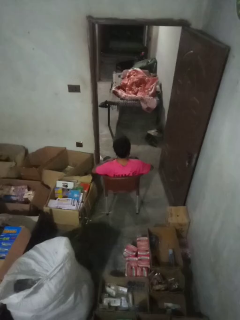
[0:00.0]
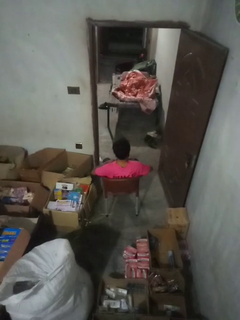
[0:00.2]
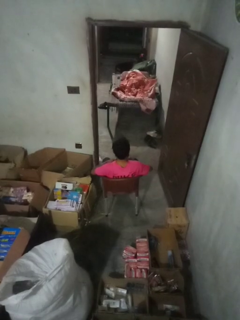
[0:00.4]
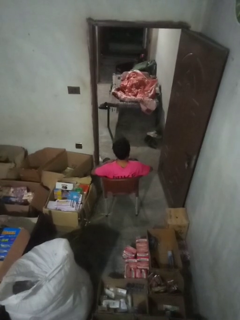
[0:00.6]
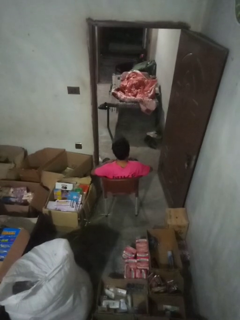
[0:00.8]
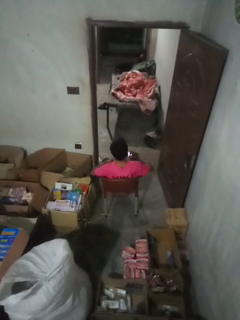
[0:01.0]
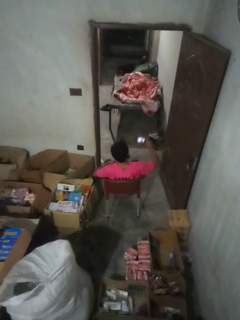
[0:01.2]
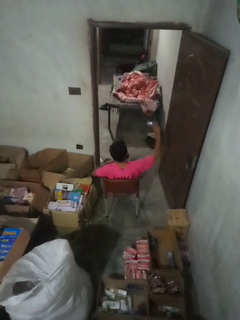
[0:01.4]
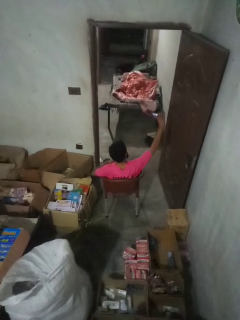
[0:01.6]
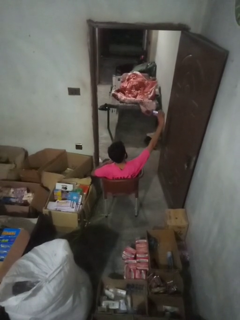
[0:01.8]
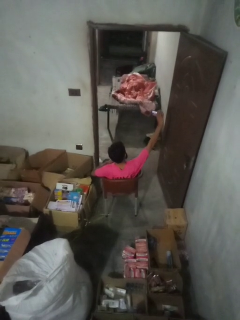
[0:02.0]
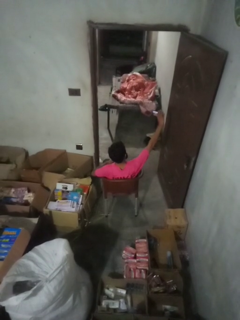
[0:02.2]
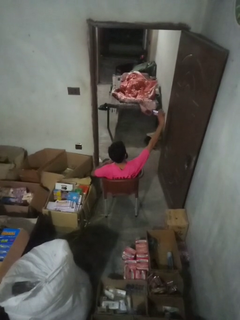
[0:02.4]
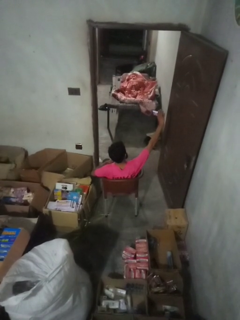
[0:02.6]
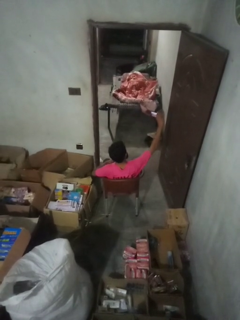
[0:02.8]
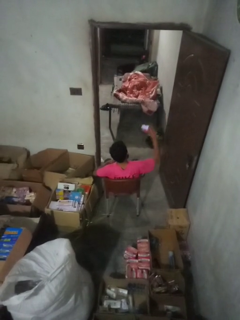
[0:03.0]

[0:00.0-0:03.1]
person takes selfie

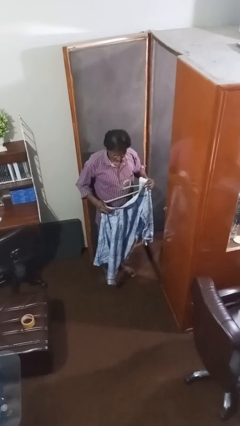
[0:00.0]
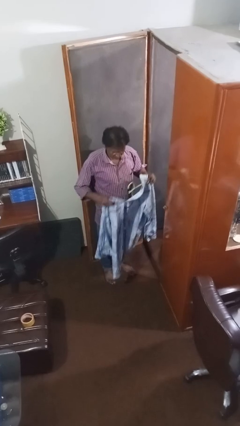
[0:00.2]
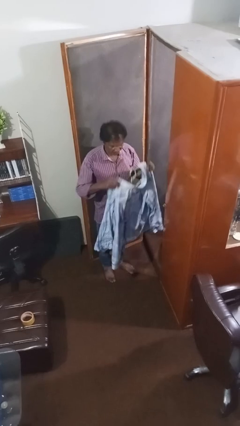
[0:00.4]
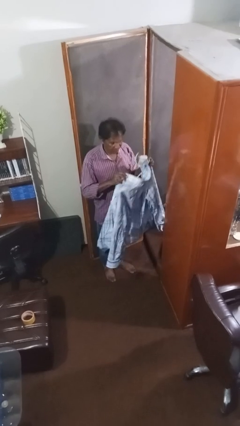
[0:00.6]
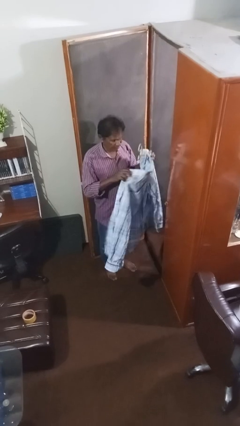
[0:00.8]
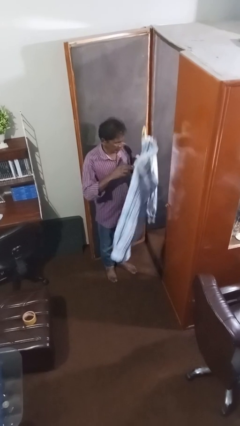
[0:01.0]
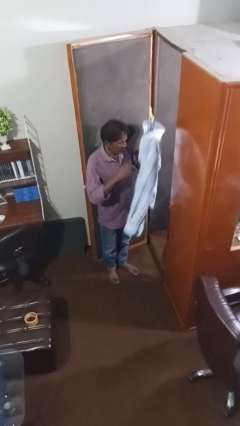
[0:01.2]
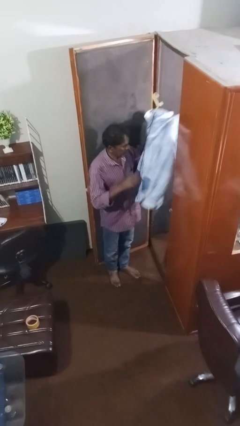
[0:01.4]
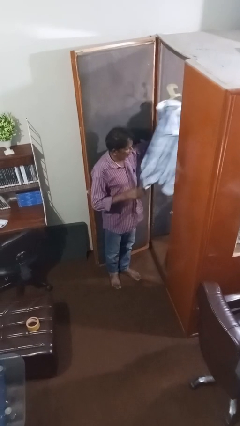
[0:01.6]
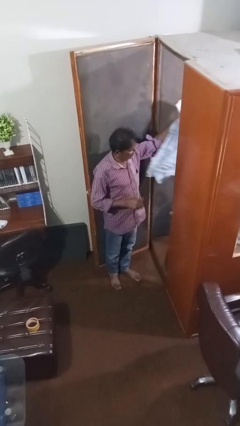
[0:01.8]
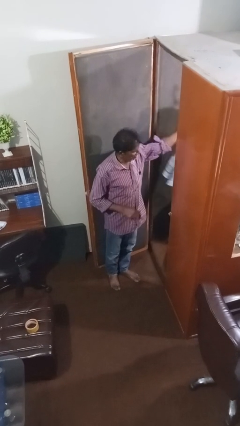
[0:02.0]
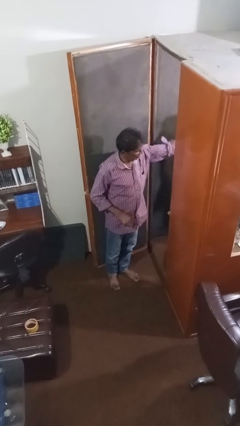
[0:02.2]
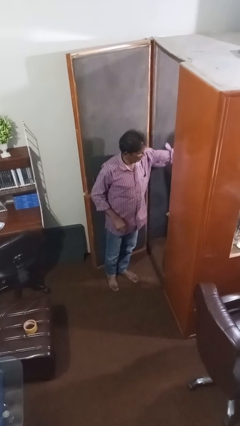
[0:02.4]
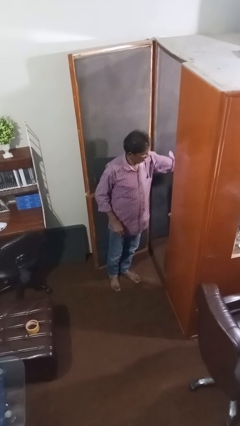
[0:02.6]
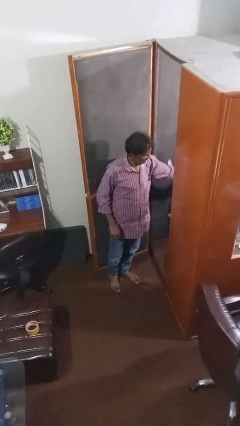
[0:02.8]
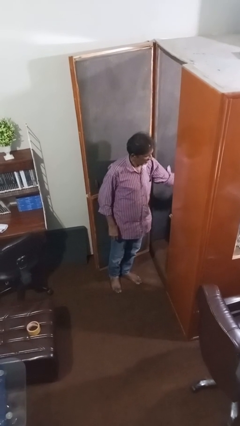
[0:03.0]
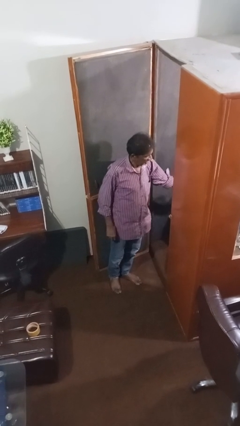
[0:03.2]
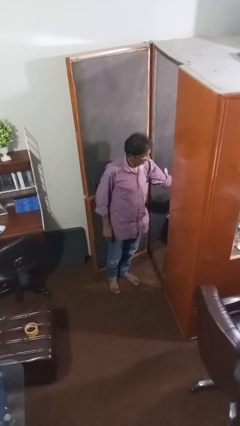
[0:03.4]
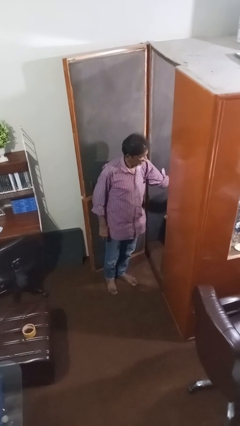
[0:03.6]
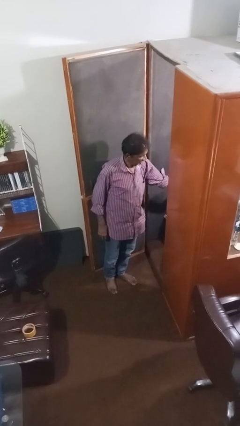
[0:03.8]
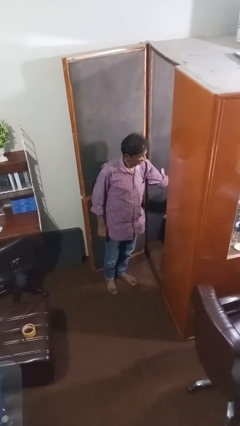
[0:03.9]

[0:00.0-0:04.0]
person puts clothes into closet

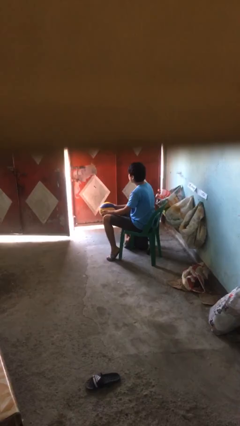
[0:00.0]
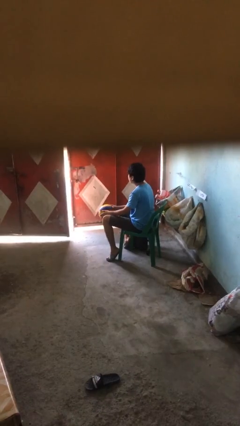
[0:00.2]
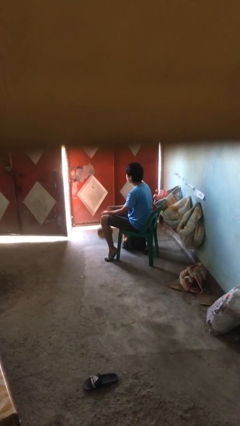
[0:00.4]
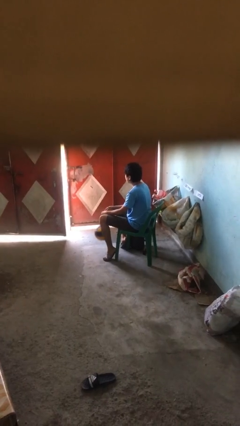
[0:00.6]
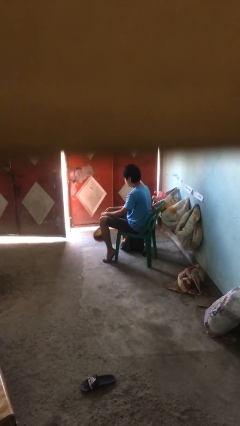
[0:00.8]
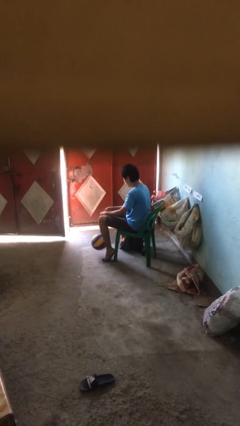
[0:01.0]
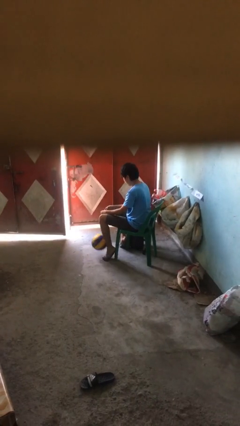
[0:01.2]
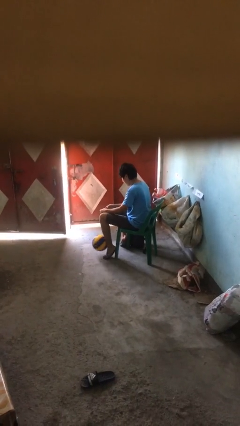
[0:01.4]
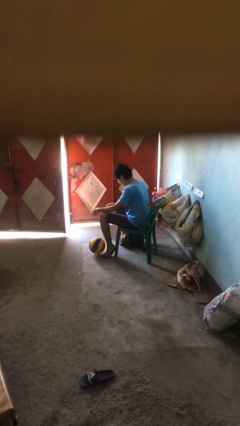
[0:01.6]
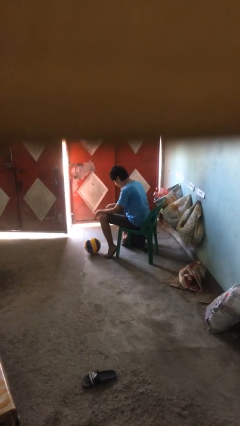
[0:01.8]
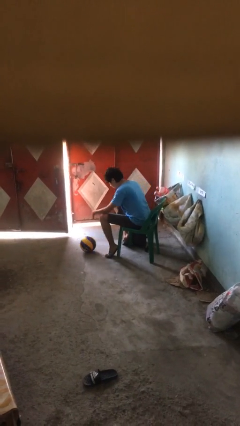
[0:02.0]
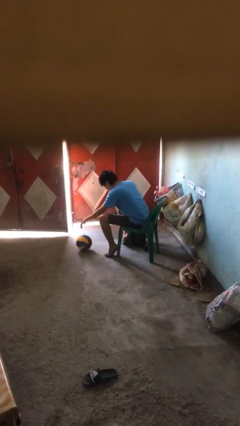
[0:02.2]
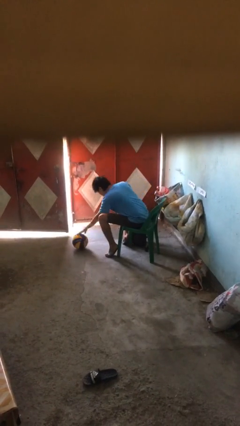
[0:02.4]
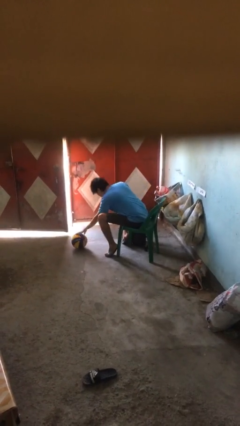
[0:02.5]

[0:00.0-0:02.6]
person drops object

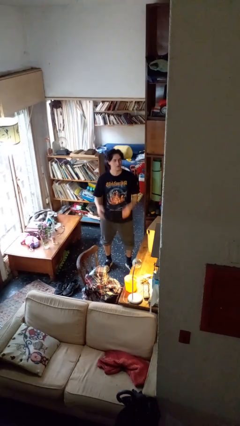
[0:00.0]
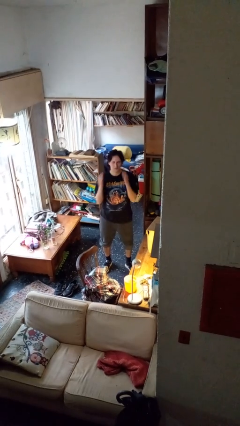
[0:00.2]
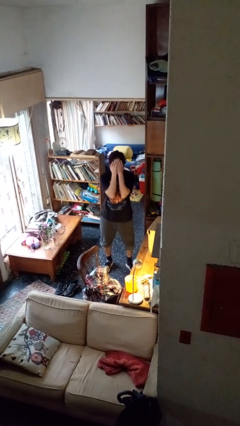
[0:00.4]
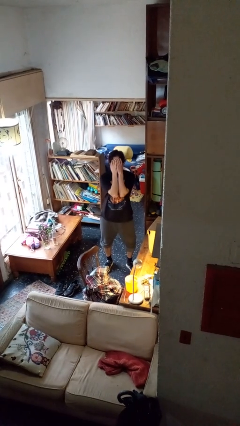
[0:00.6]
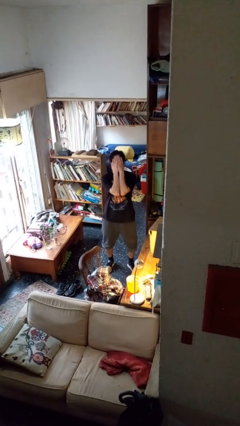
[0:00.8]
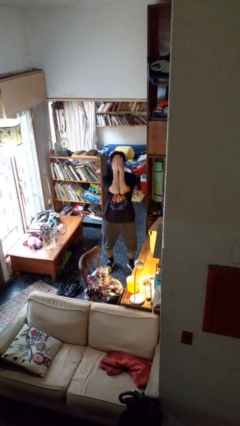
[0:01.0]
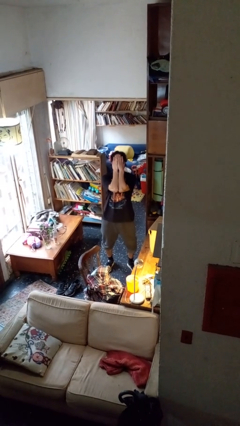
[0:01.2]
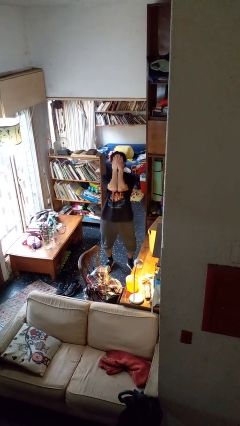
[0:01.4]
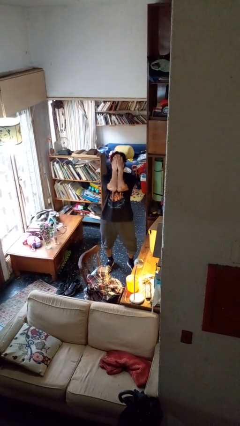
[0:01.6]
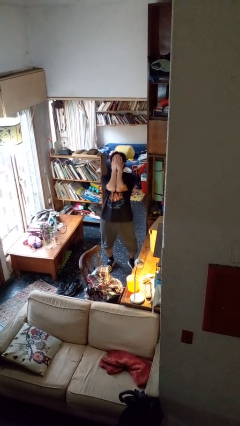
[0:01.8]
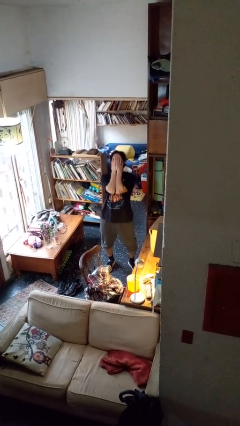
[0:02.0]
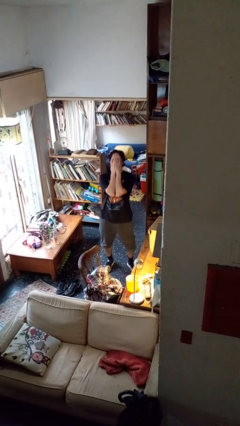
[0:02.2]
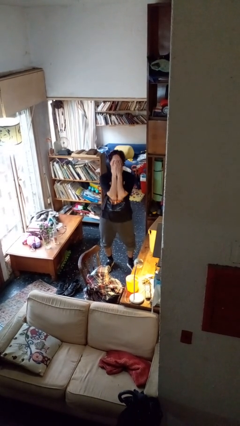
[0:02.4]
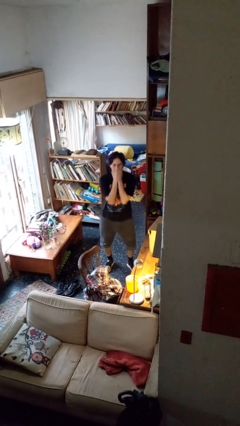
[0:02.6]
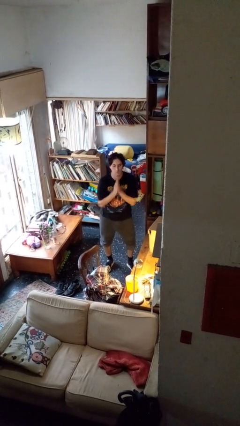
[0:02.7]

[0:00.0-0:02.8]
person covers face with hands

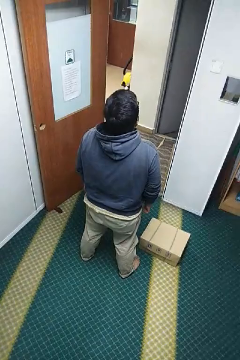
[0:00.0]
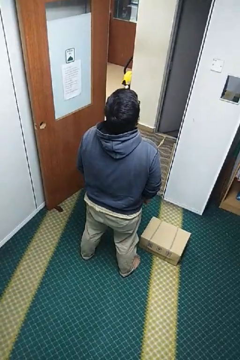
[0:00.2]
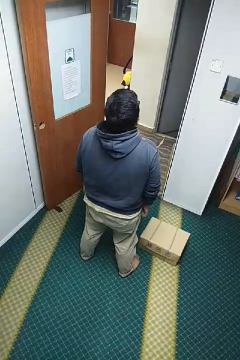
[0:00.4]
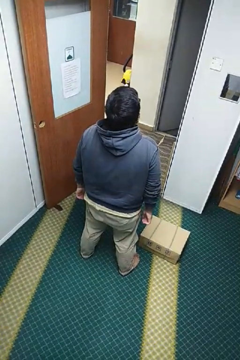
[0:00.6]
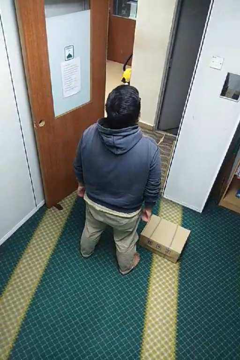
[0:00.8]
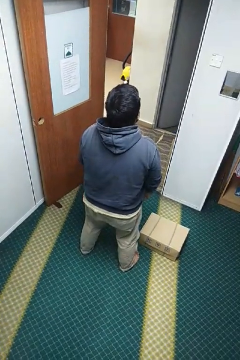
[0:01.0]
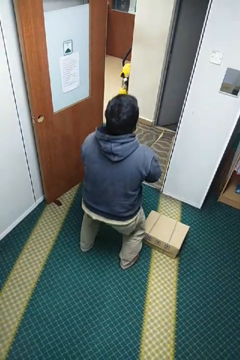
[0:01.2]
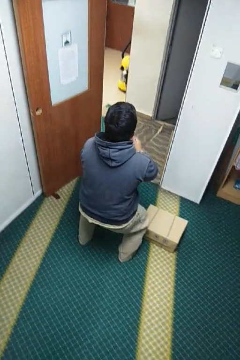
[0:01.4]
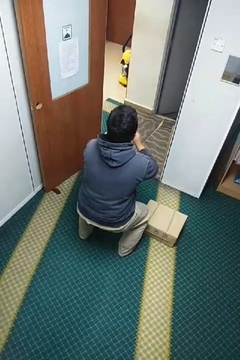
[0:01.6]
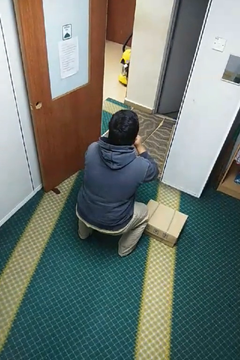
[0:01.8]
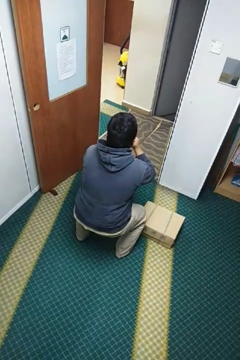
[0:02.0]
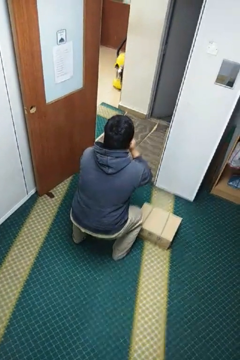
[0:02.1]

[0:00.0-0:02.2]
person squats

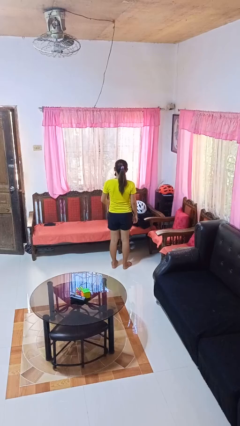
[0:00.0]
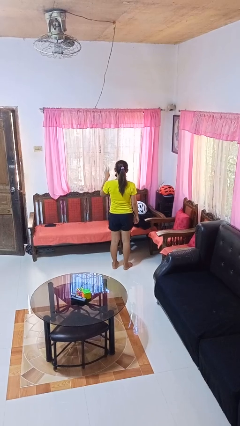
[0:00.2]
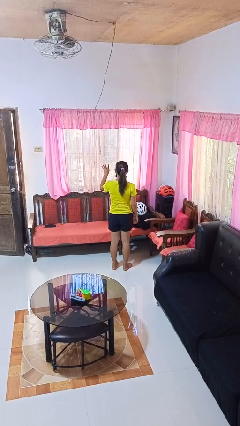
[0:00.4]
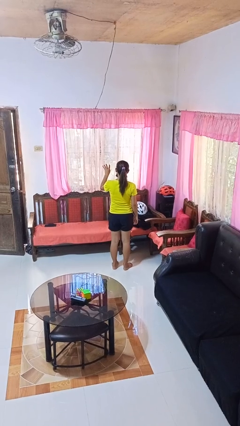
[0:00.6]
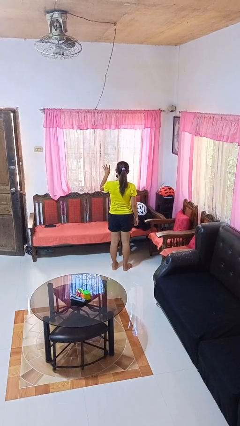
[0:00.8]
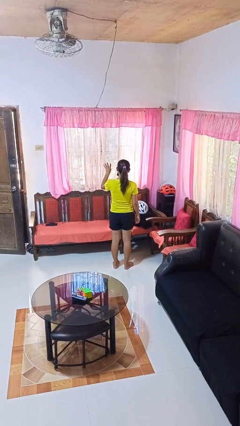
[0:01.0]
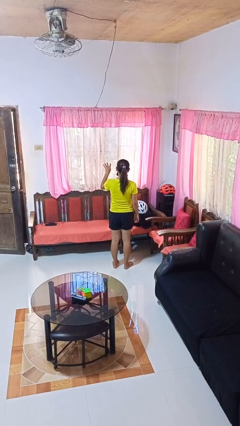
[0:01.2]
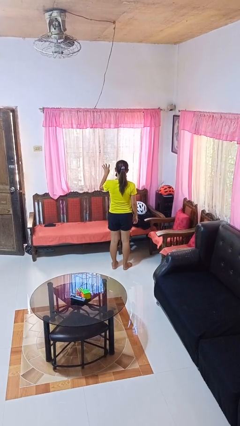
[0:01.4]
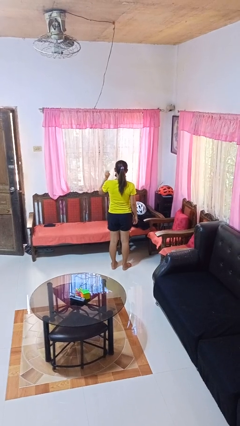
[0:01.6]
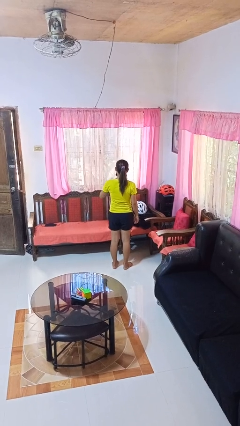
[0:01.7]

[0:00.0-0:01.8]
person gestures number four

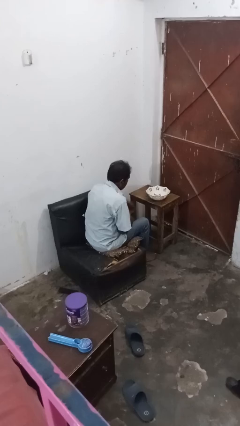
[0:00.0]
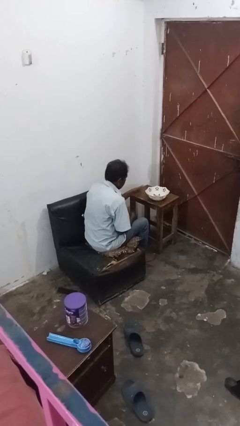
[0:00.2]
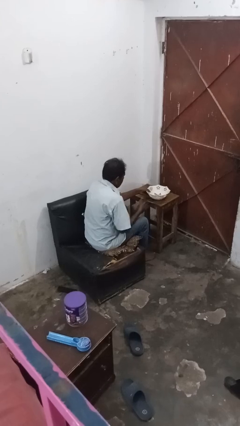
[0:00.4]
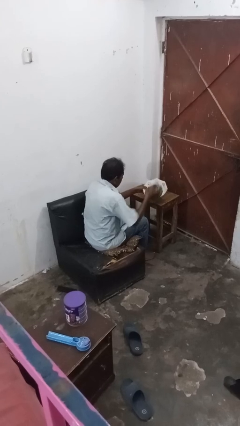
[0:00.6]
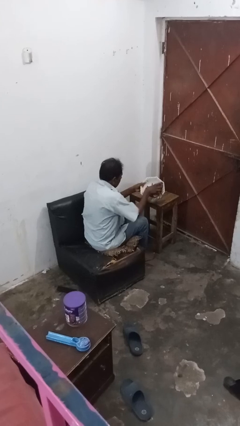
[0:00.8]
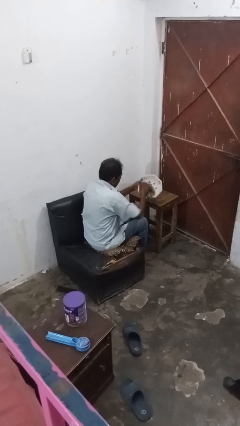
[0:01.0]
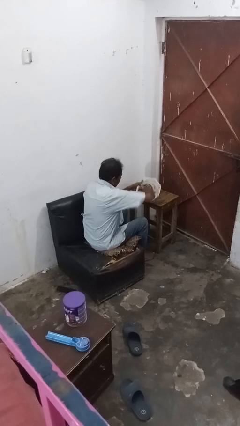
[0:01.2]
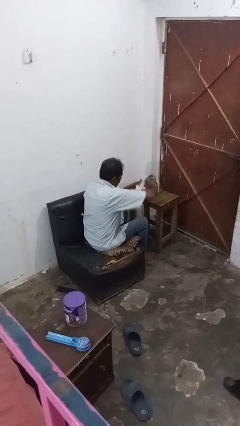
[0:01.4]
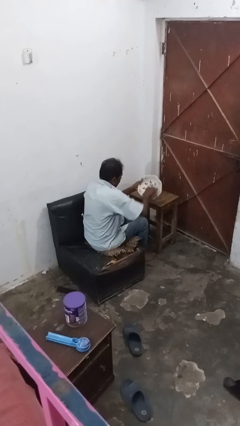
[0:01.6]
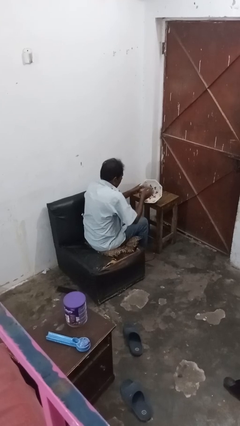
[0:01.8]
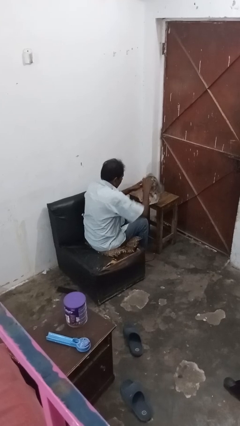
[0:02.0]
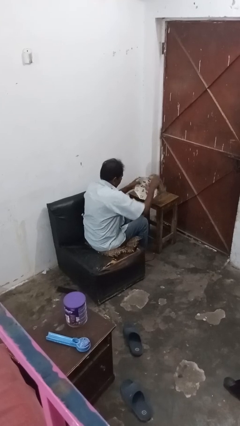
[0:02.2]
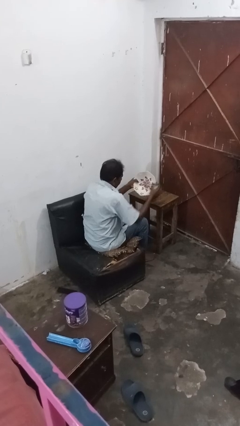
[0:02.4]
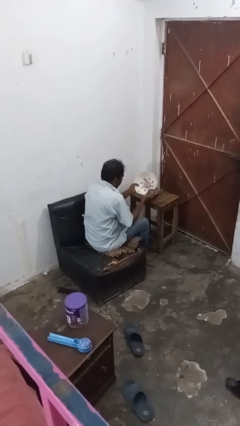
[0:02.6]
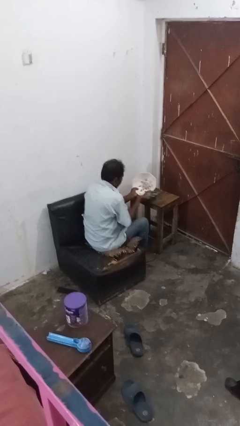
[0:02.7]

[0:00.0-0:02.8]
person dries dish
